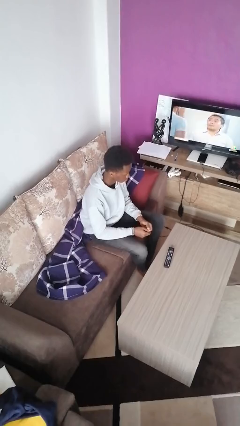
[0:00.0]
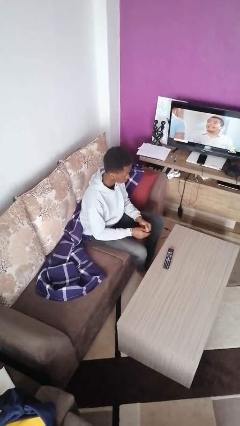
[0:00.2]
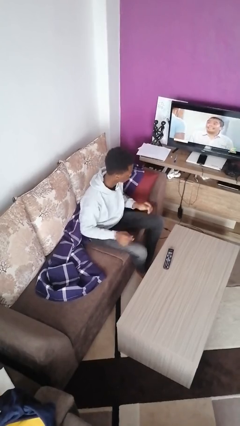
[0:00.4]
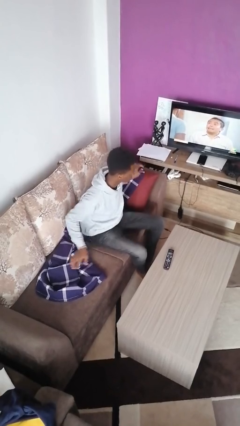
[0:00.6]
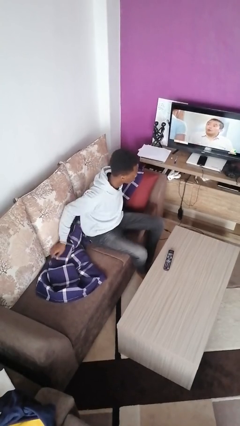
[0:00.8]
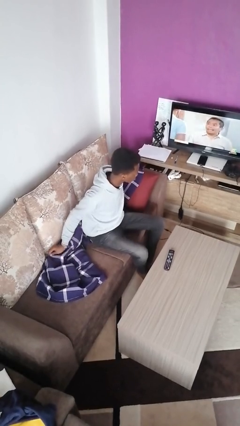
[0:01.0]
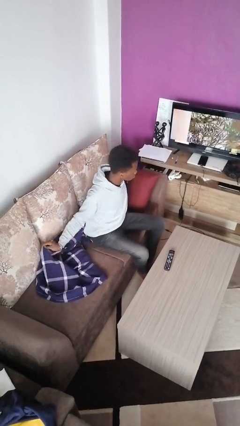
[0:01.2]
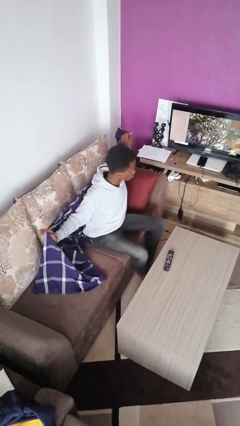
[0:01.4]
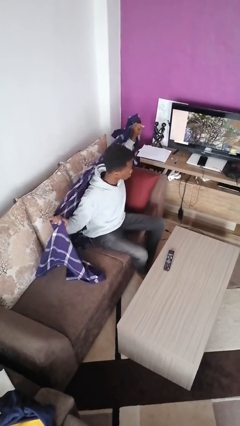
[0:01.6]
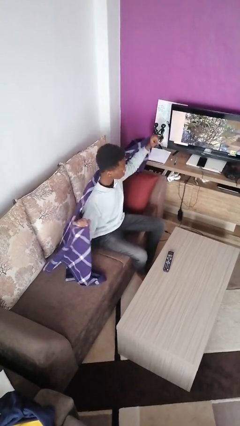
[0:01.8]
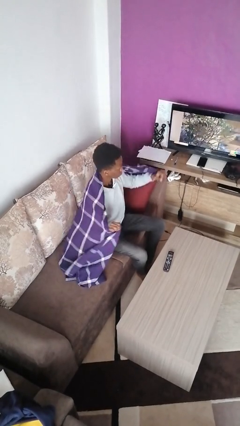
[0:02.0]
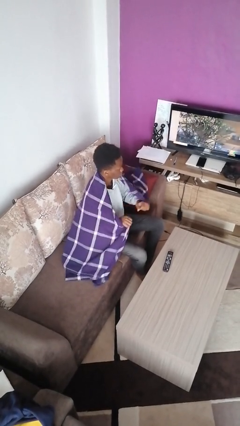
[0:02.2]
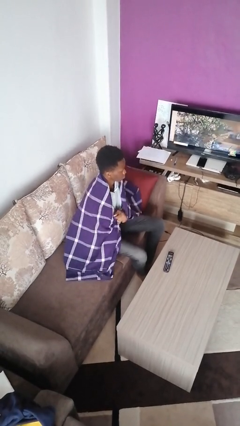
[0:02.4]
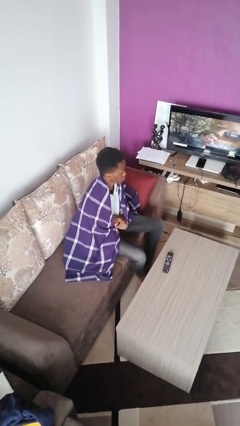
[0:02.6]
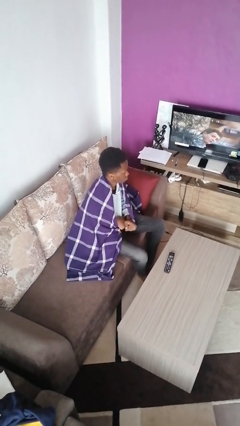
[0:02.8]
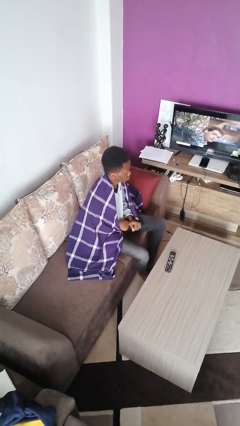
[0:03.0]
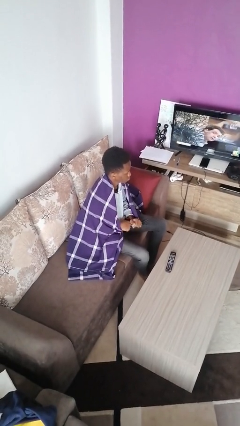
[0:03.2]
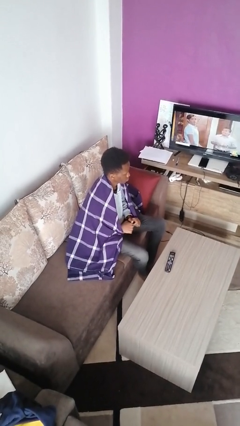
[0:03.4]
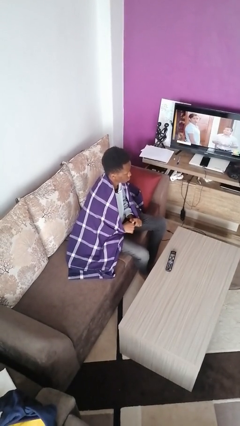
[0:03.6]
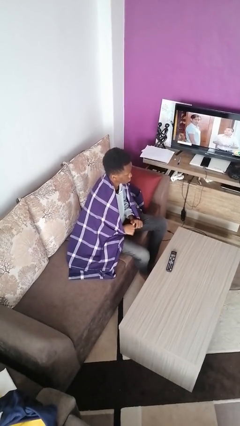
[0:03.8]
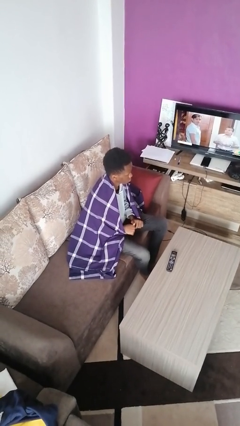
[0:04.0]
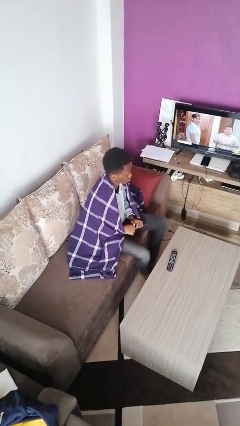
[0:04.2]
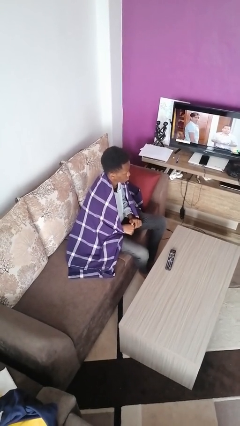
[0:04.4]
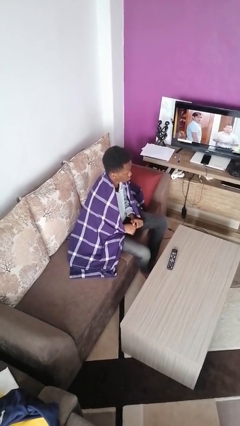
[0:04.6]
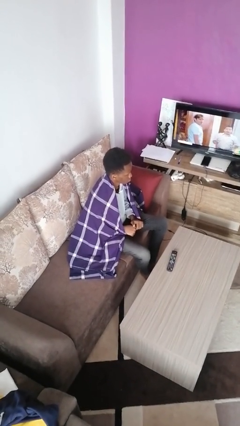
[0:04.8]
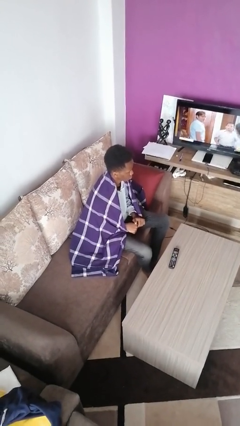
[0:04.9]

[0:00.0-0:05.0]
person covers with blanket

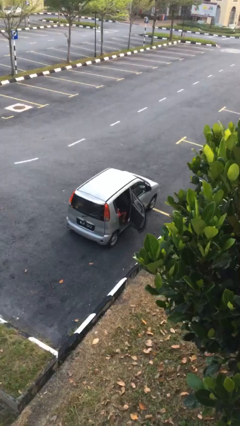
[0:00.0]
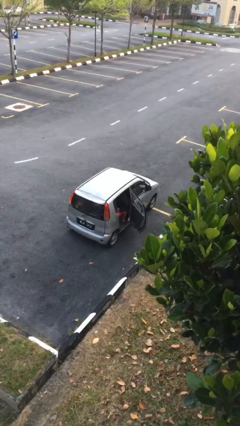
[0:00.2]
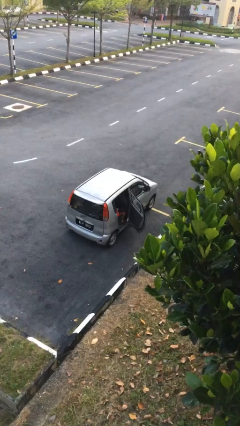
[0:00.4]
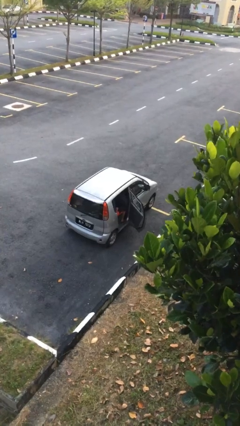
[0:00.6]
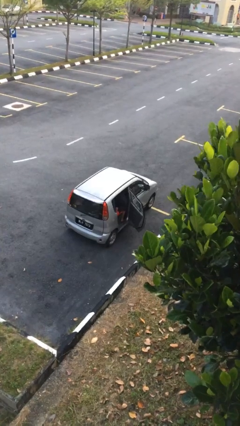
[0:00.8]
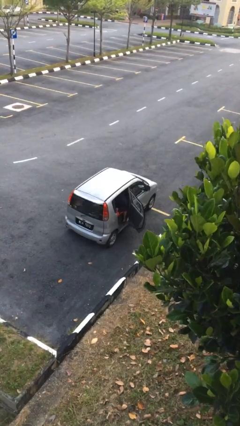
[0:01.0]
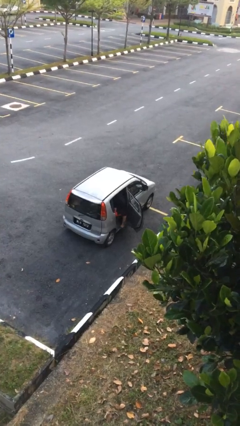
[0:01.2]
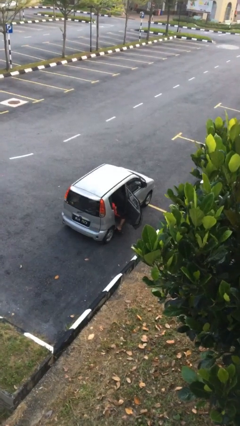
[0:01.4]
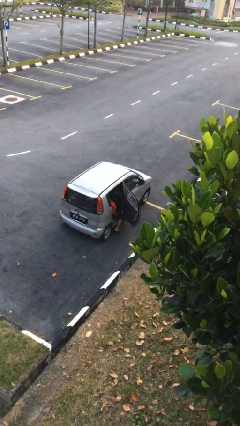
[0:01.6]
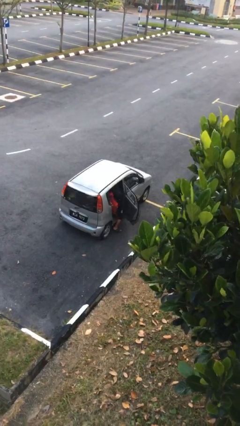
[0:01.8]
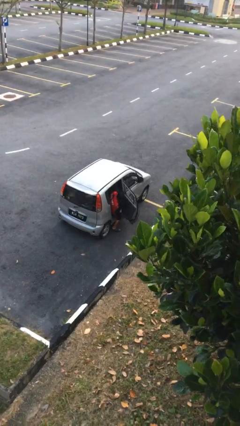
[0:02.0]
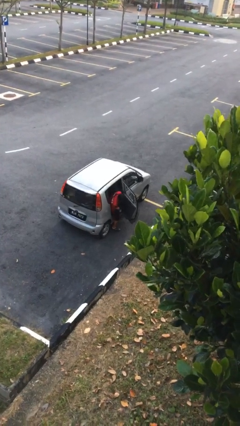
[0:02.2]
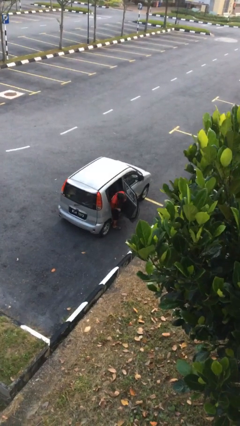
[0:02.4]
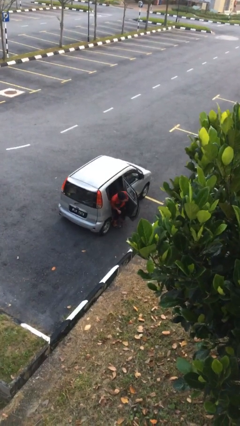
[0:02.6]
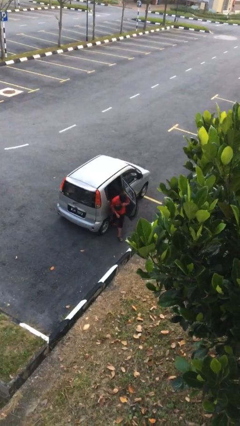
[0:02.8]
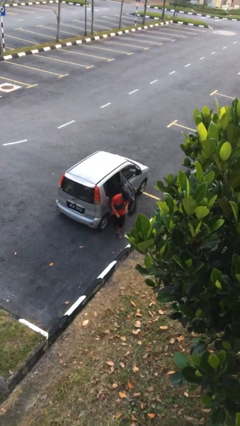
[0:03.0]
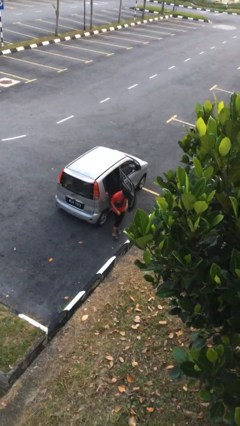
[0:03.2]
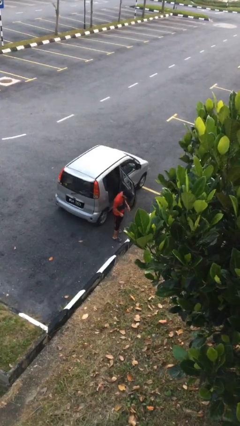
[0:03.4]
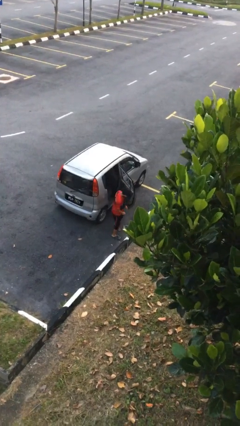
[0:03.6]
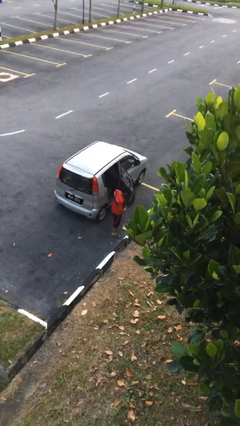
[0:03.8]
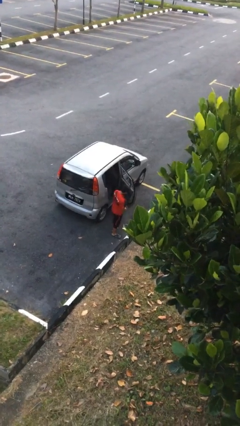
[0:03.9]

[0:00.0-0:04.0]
person exits car

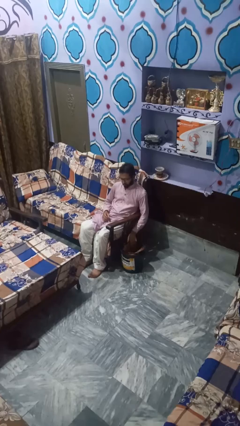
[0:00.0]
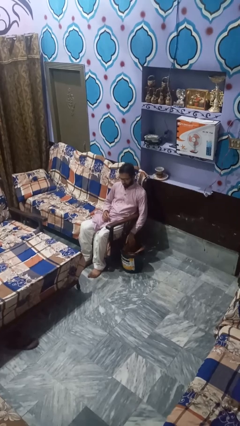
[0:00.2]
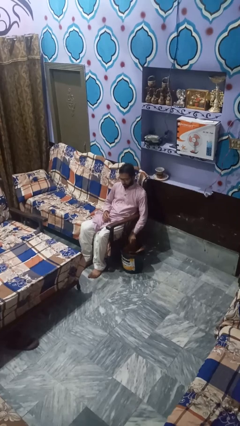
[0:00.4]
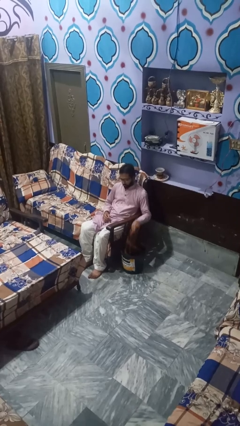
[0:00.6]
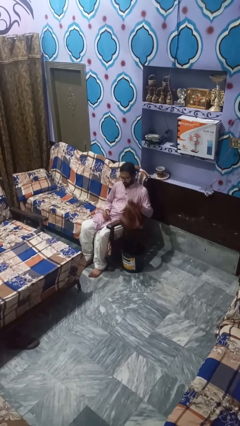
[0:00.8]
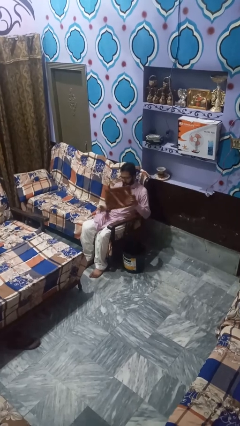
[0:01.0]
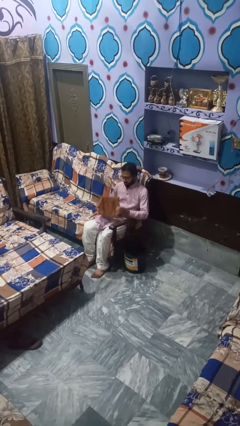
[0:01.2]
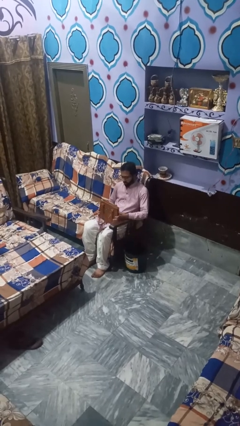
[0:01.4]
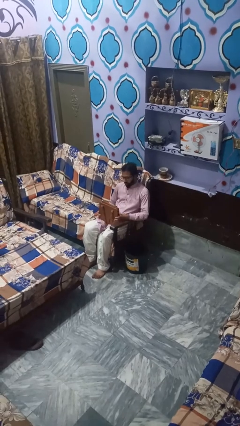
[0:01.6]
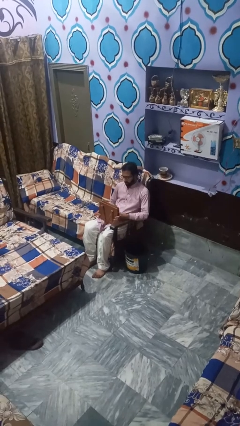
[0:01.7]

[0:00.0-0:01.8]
person takes object from basket

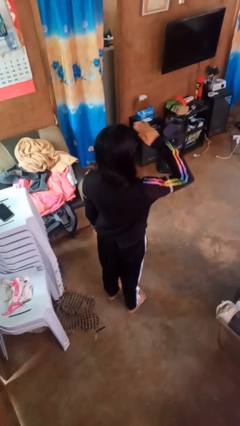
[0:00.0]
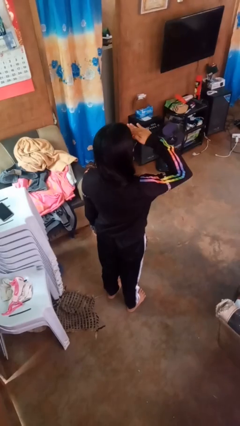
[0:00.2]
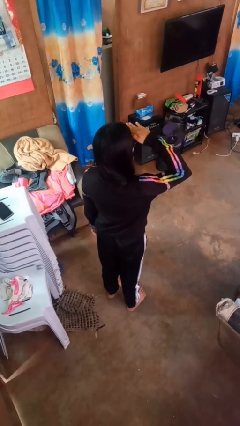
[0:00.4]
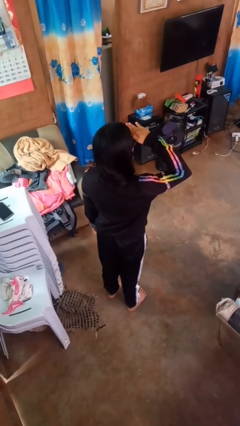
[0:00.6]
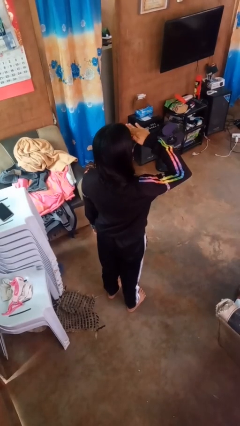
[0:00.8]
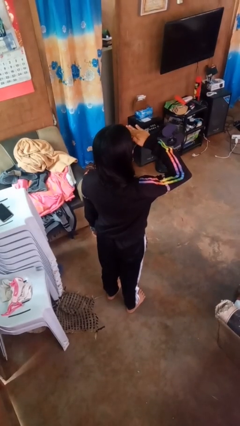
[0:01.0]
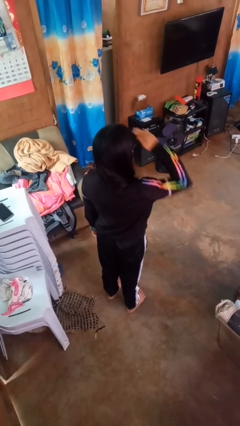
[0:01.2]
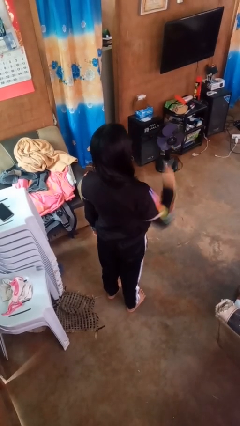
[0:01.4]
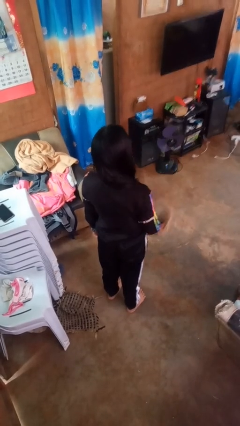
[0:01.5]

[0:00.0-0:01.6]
person salutes

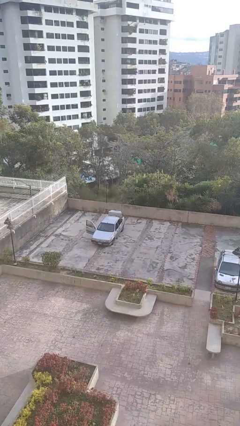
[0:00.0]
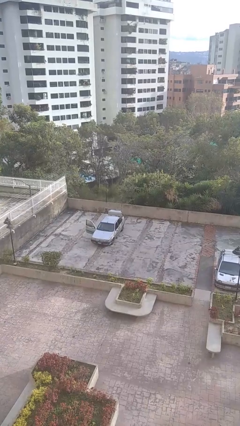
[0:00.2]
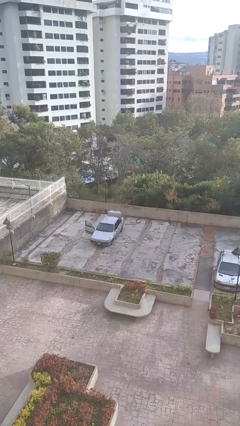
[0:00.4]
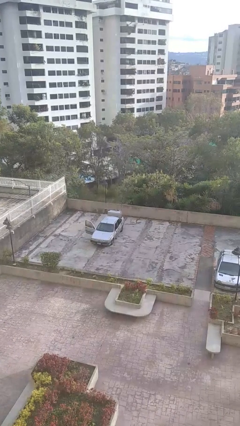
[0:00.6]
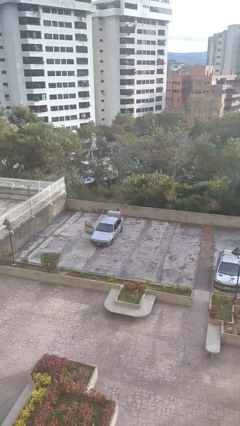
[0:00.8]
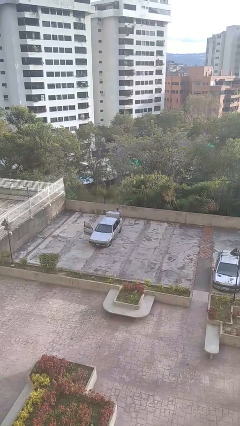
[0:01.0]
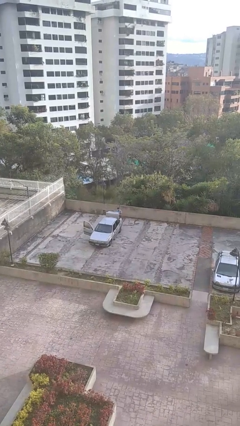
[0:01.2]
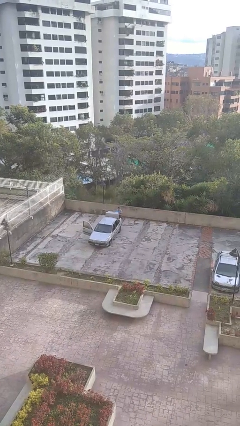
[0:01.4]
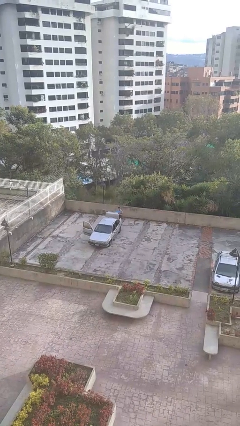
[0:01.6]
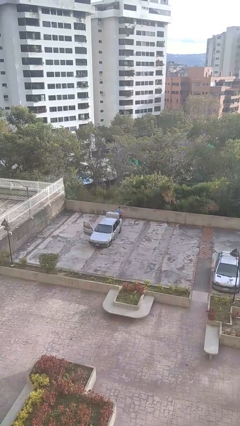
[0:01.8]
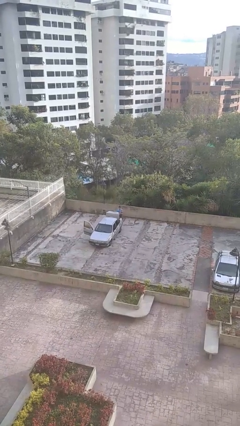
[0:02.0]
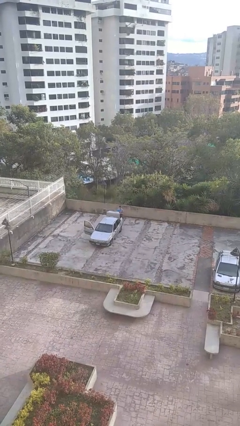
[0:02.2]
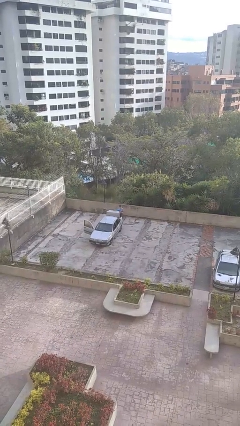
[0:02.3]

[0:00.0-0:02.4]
person unloads car

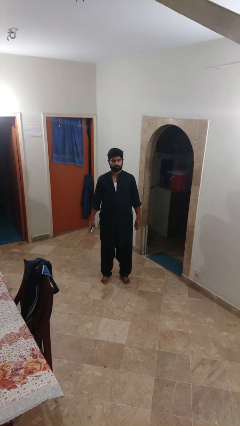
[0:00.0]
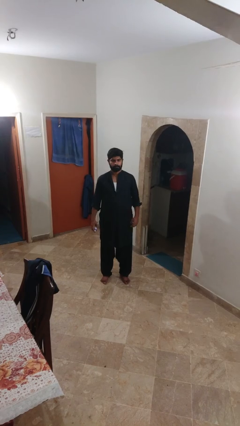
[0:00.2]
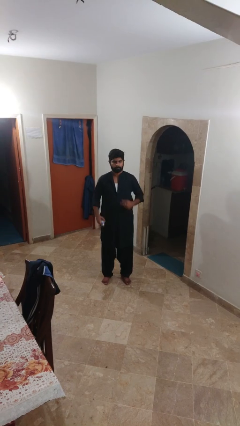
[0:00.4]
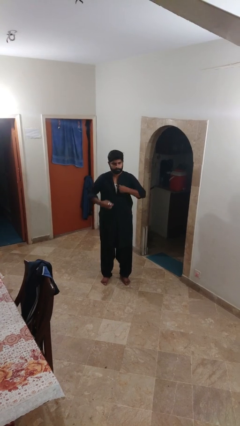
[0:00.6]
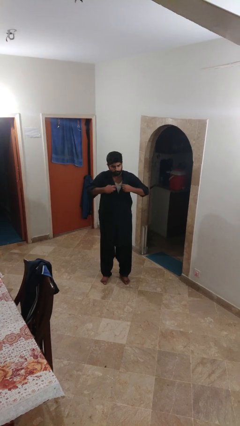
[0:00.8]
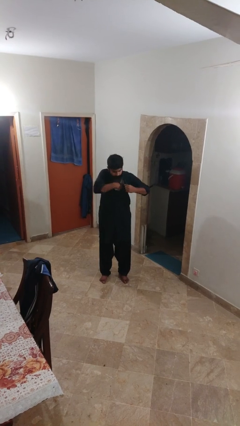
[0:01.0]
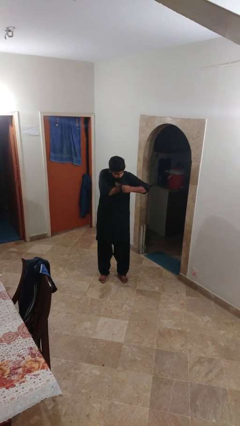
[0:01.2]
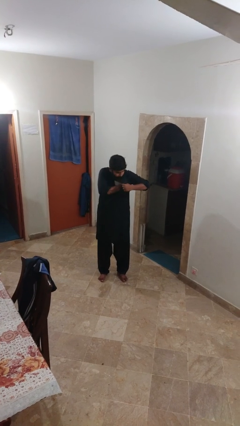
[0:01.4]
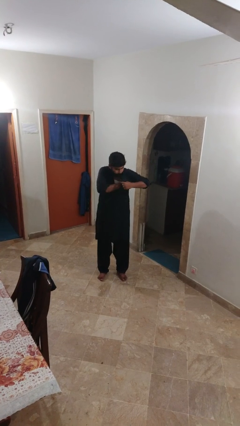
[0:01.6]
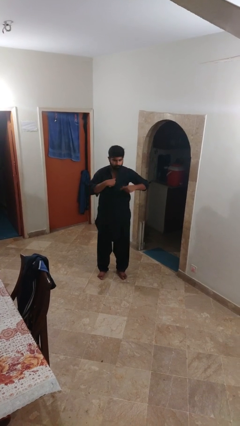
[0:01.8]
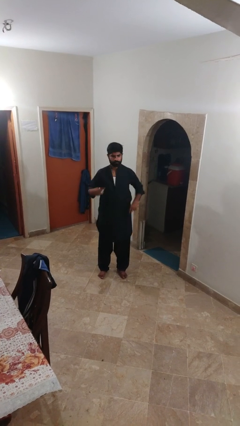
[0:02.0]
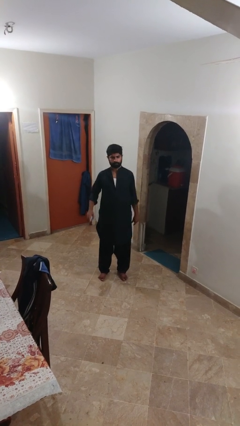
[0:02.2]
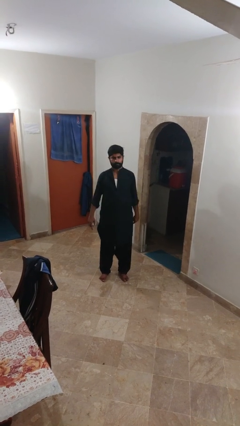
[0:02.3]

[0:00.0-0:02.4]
person applies deodorant

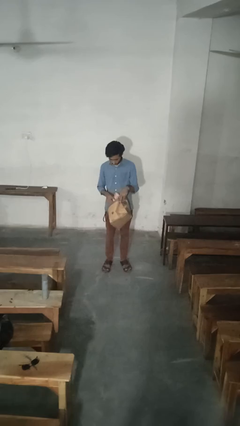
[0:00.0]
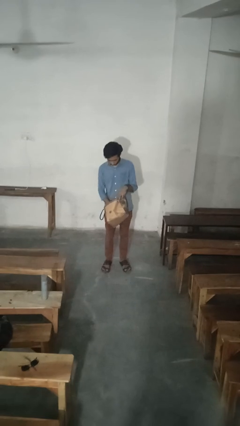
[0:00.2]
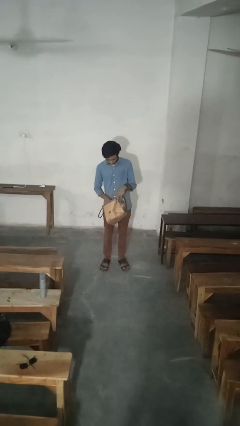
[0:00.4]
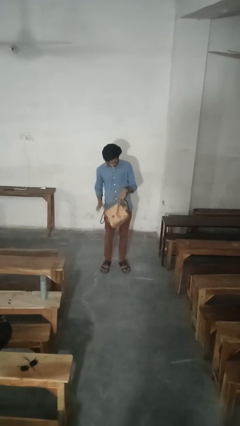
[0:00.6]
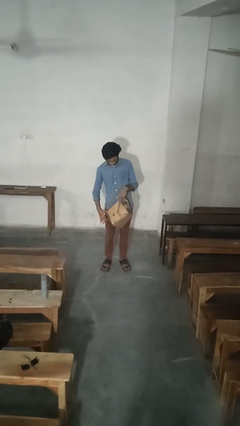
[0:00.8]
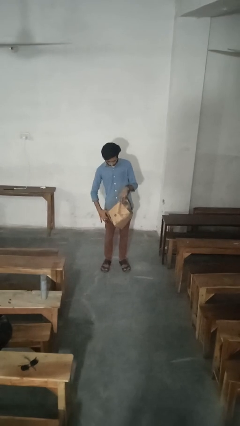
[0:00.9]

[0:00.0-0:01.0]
person puts object into purse
